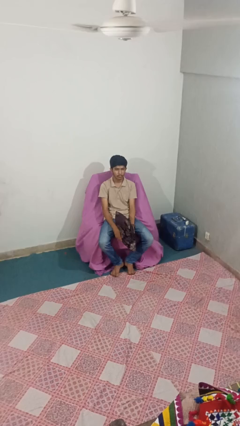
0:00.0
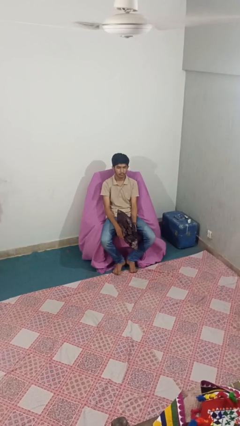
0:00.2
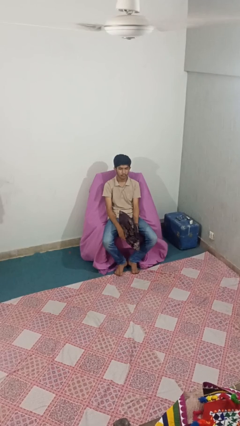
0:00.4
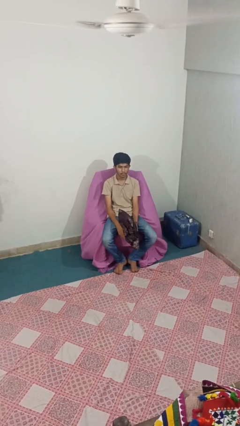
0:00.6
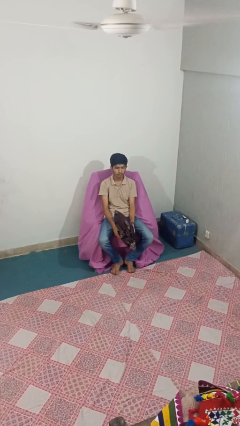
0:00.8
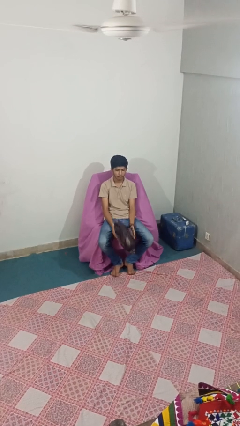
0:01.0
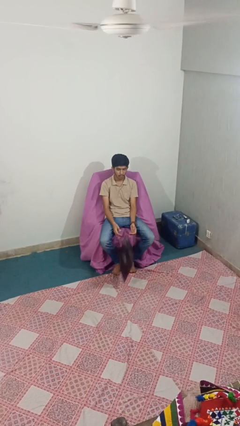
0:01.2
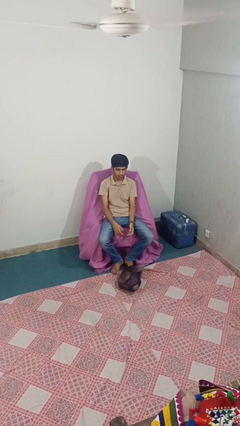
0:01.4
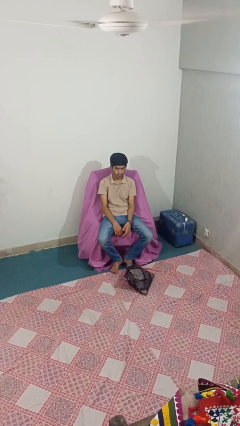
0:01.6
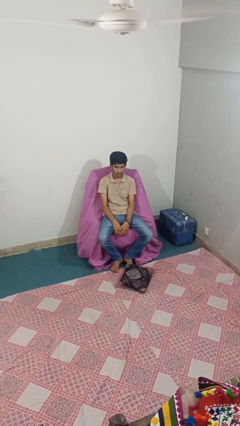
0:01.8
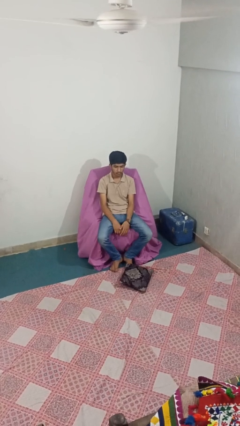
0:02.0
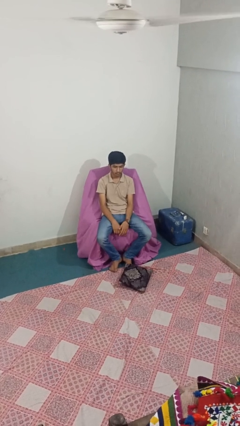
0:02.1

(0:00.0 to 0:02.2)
person drops object

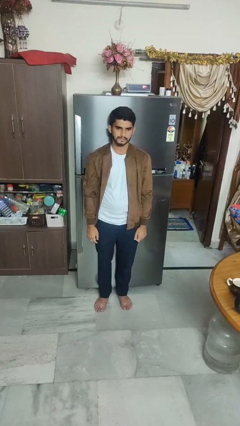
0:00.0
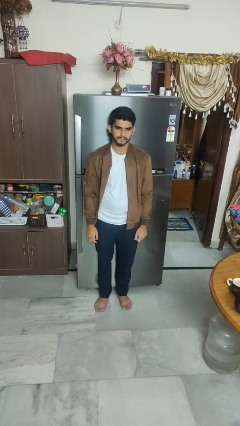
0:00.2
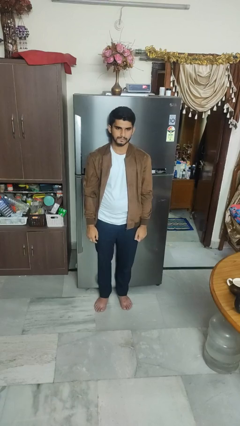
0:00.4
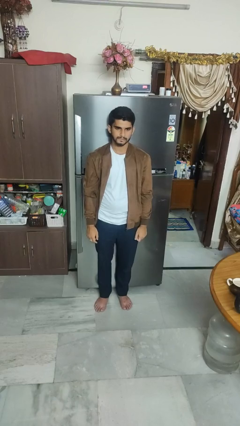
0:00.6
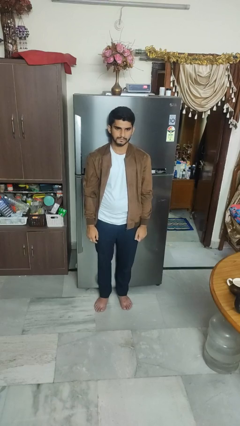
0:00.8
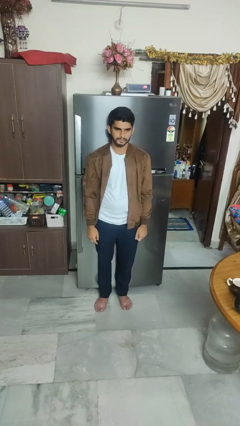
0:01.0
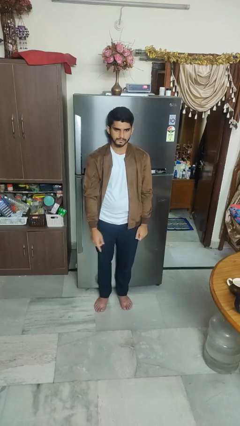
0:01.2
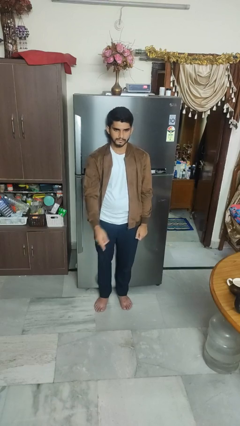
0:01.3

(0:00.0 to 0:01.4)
person gestures number one

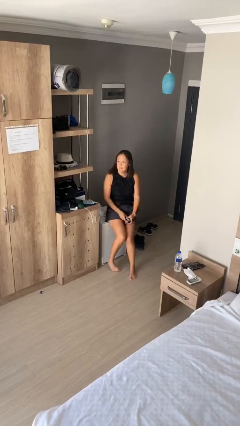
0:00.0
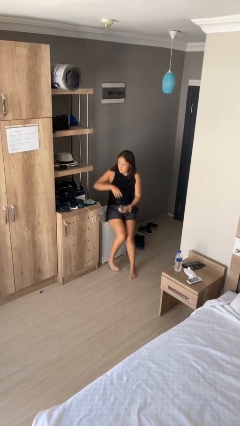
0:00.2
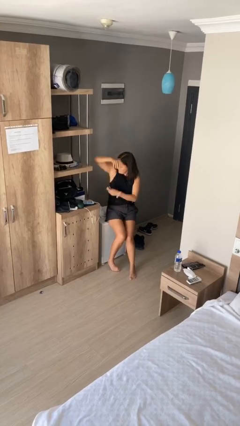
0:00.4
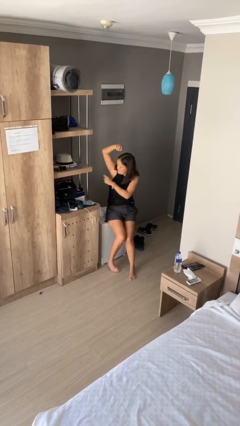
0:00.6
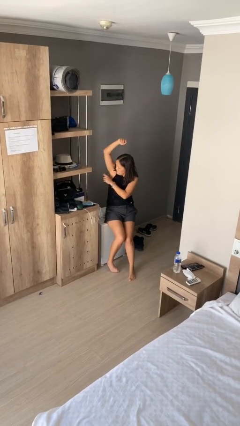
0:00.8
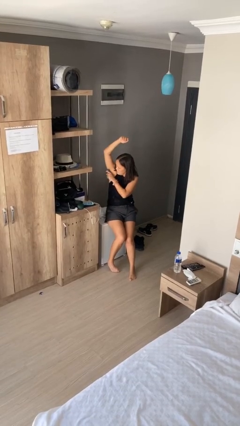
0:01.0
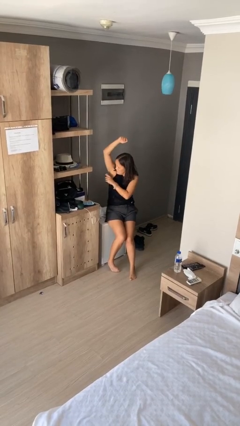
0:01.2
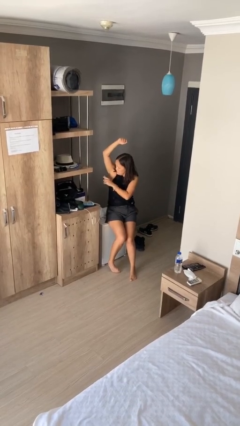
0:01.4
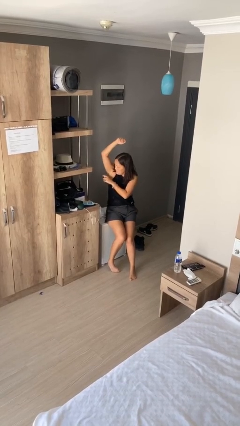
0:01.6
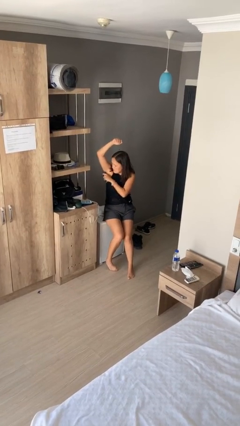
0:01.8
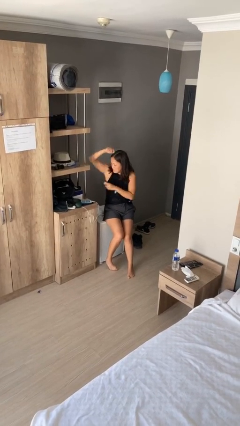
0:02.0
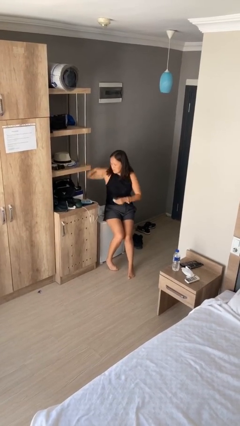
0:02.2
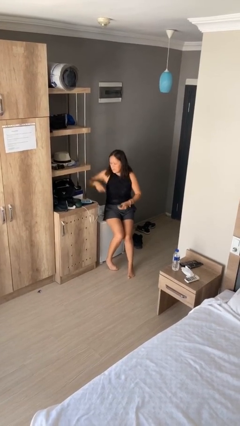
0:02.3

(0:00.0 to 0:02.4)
person applies deodorant

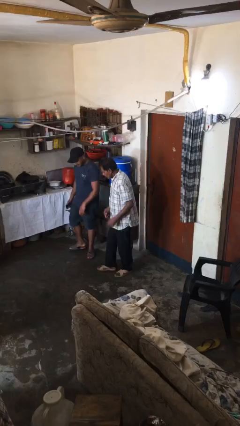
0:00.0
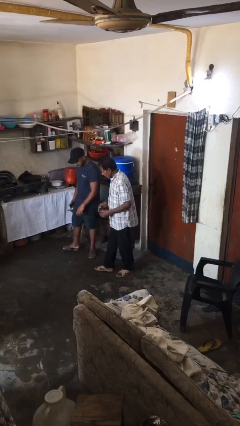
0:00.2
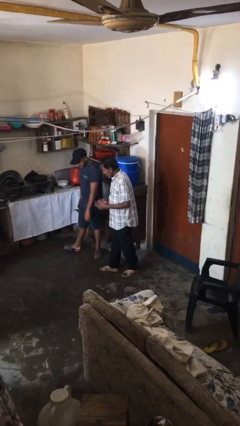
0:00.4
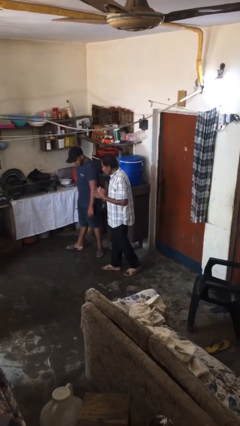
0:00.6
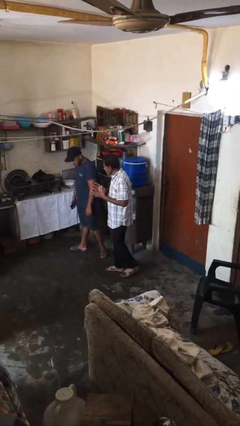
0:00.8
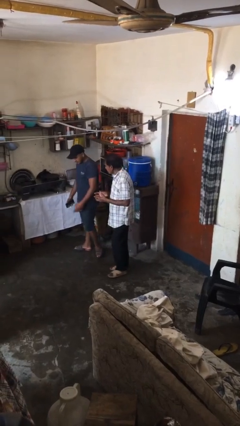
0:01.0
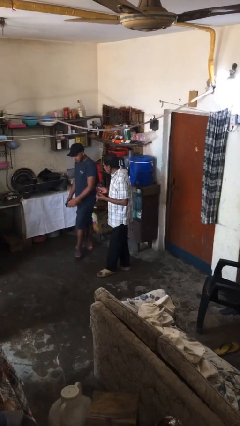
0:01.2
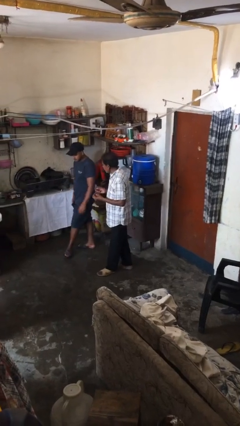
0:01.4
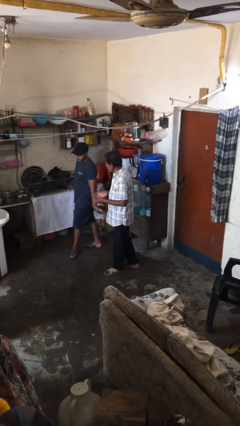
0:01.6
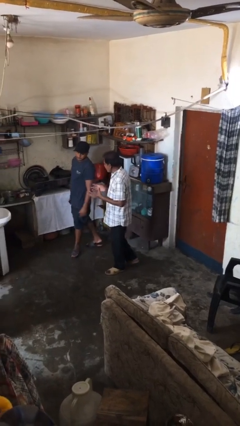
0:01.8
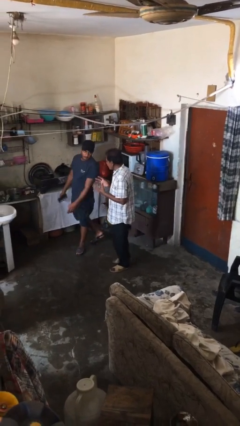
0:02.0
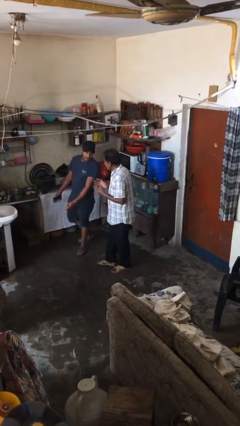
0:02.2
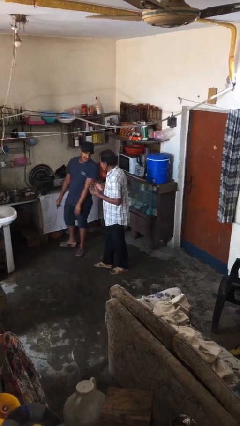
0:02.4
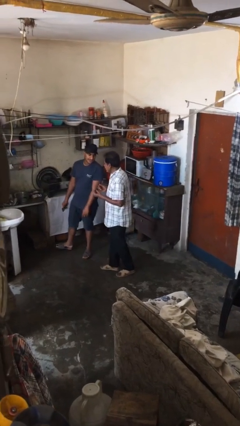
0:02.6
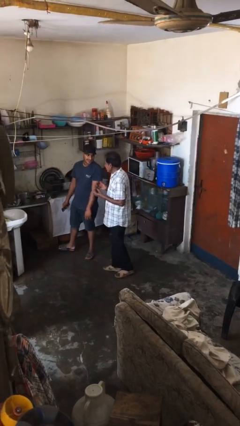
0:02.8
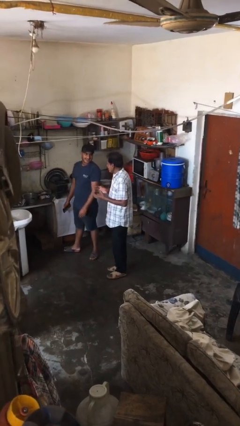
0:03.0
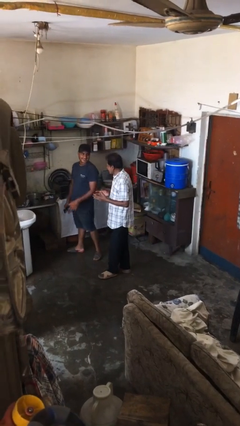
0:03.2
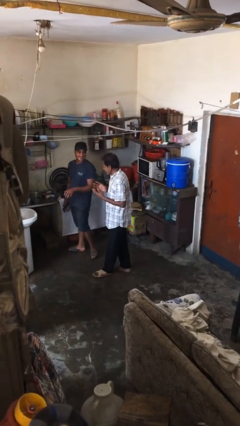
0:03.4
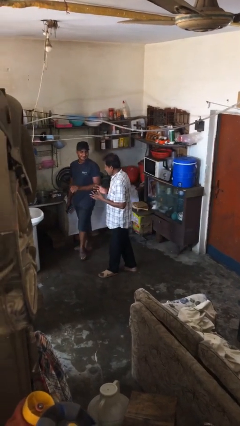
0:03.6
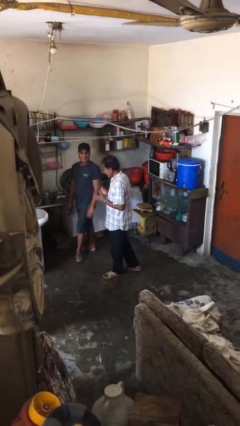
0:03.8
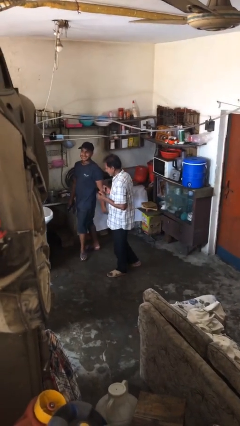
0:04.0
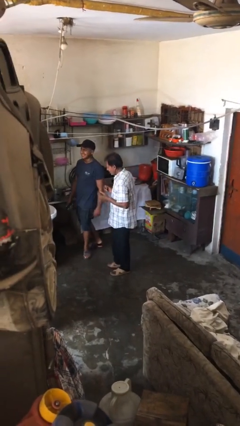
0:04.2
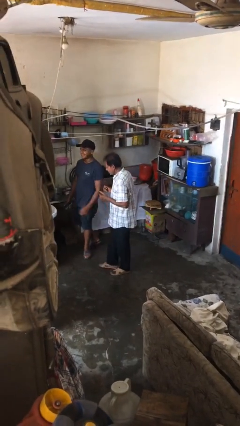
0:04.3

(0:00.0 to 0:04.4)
person talks to person

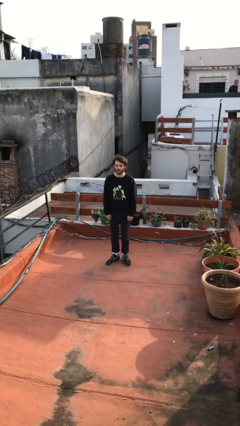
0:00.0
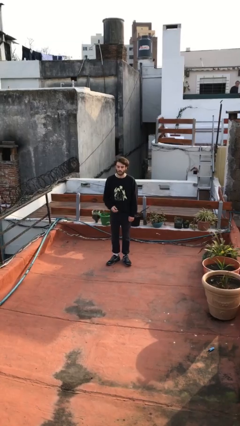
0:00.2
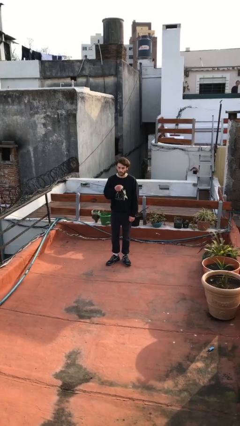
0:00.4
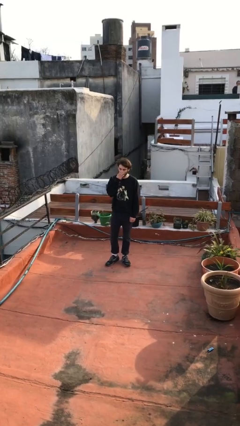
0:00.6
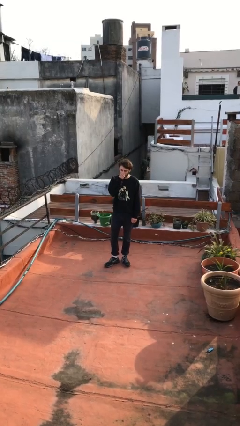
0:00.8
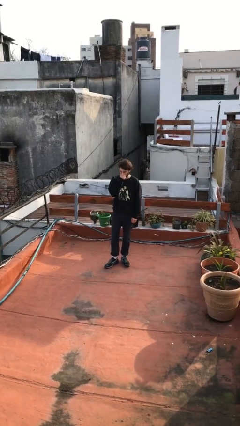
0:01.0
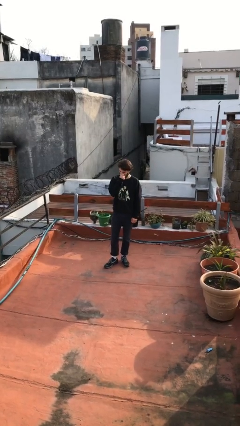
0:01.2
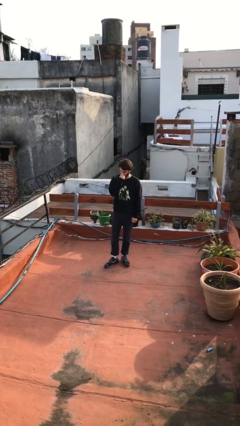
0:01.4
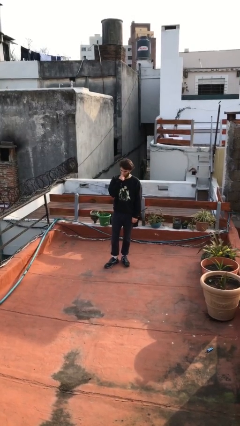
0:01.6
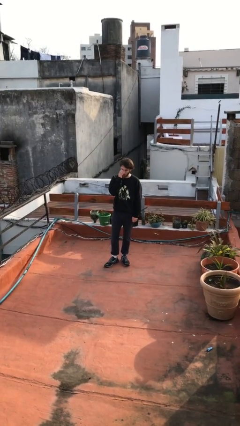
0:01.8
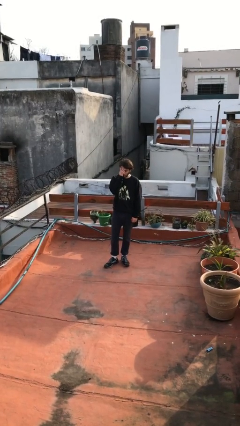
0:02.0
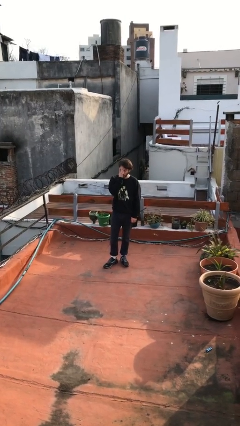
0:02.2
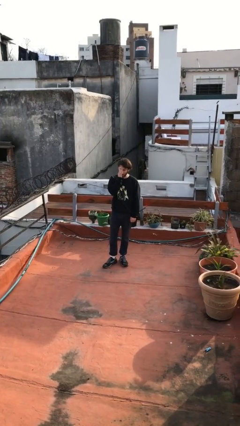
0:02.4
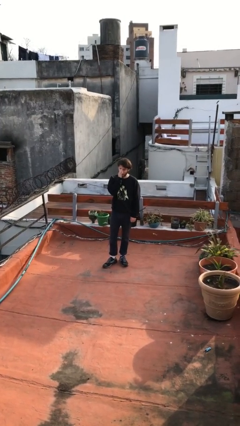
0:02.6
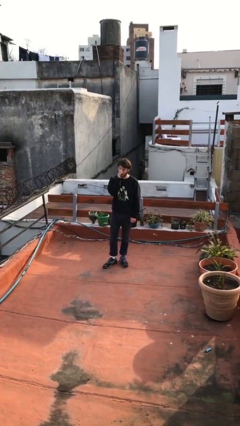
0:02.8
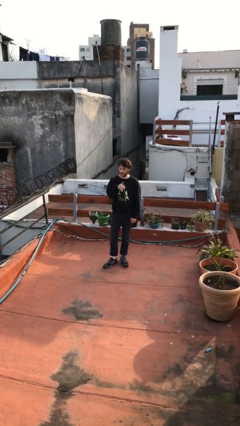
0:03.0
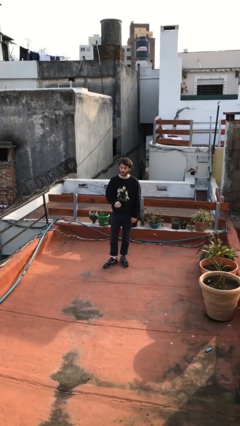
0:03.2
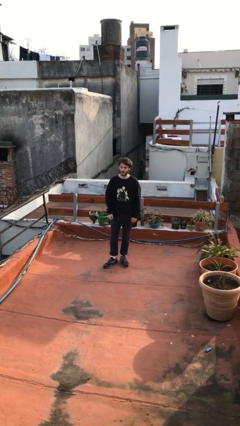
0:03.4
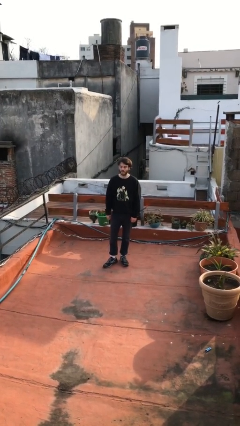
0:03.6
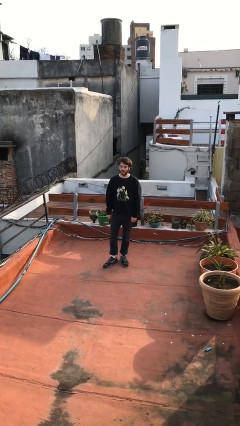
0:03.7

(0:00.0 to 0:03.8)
person scratches face

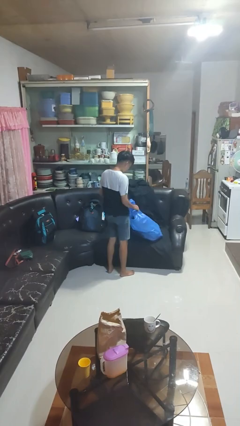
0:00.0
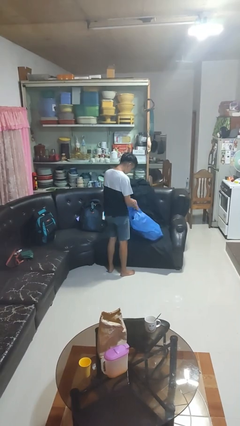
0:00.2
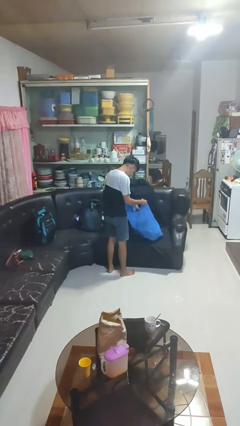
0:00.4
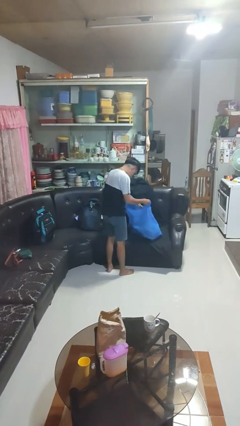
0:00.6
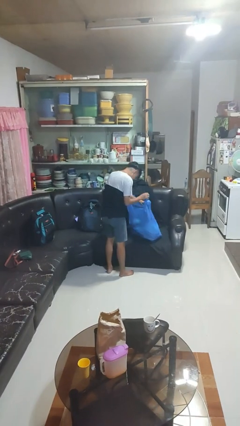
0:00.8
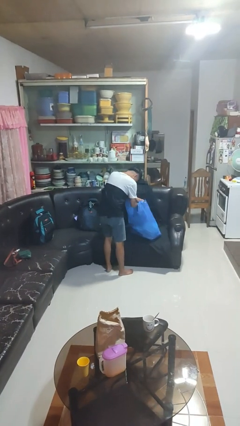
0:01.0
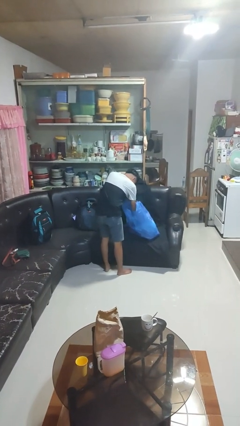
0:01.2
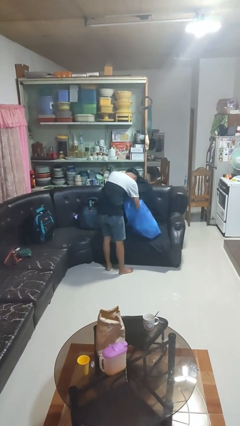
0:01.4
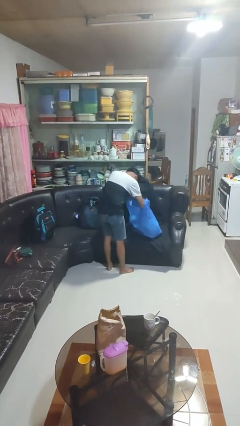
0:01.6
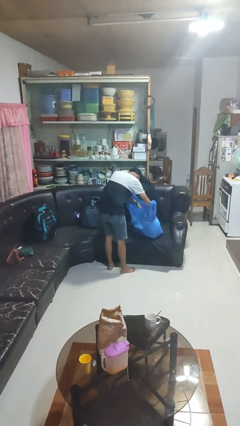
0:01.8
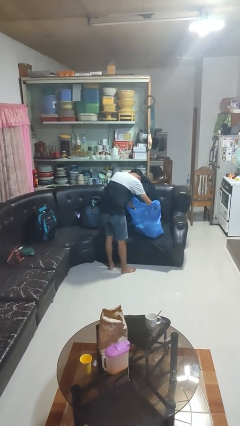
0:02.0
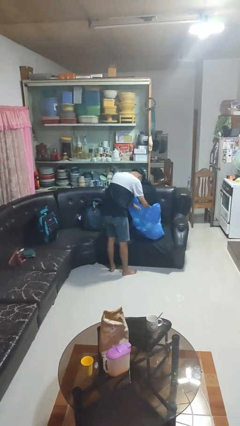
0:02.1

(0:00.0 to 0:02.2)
person searches in bag

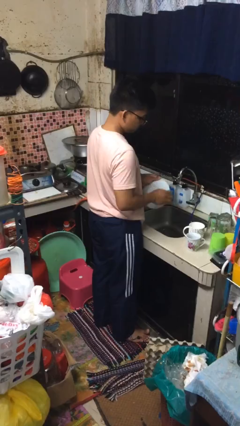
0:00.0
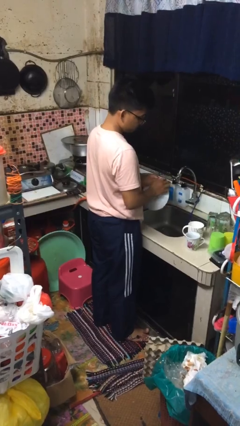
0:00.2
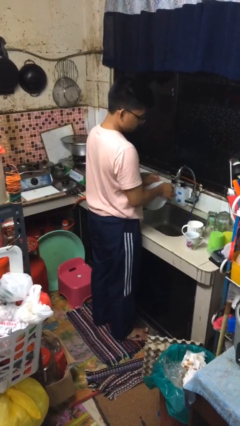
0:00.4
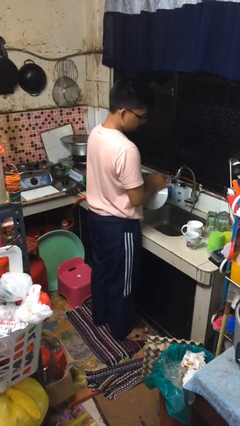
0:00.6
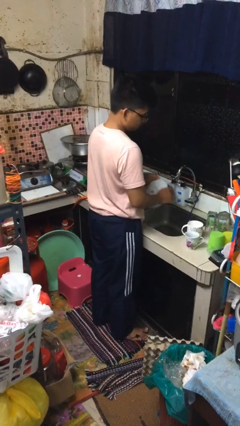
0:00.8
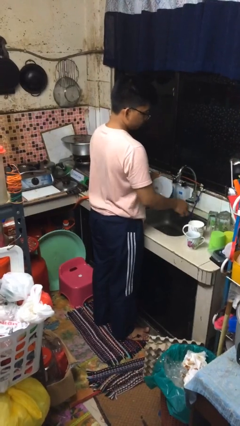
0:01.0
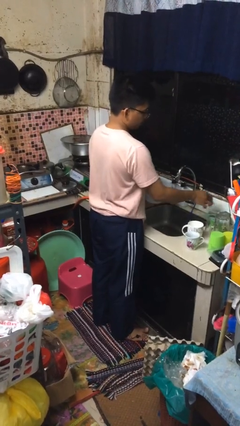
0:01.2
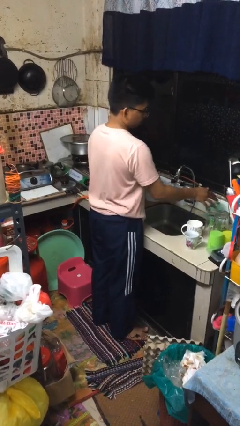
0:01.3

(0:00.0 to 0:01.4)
person washes dish
